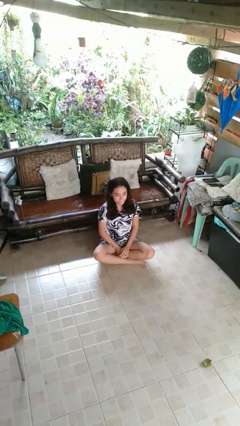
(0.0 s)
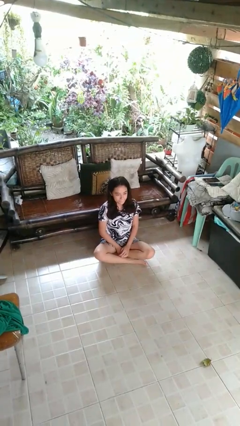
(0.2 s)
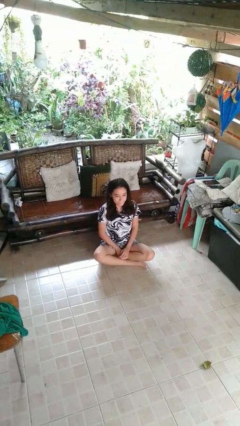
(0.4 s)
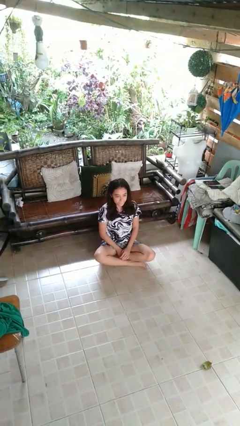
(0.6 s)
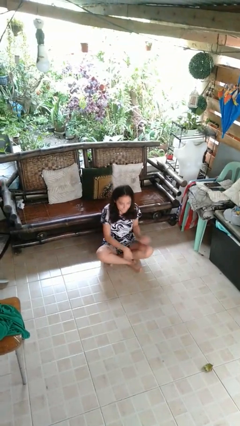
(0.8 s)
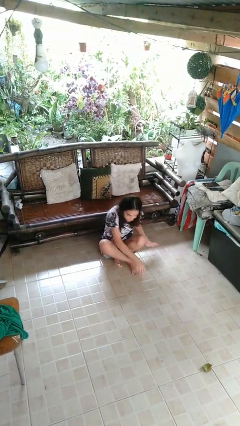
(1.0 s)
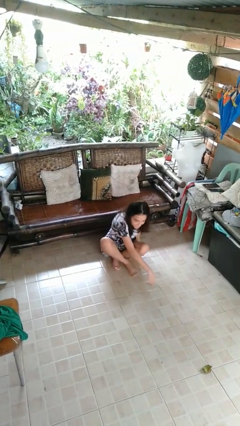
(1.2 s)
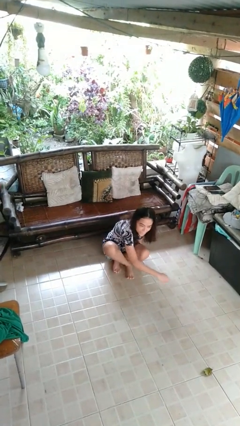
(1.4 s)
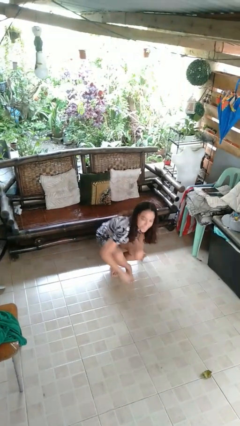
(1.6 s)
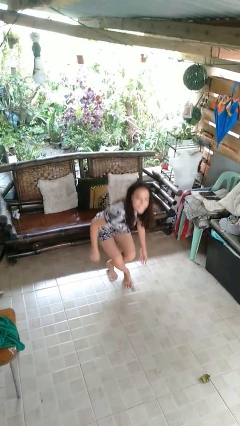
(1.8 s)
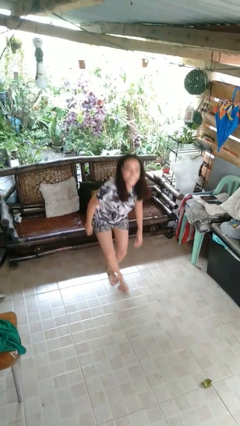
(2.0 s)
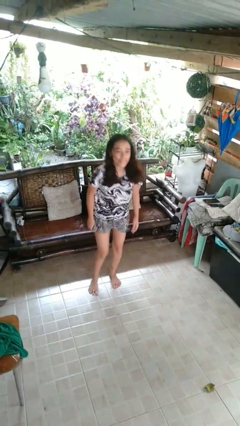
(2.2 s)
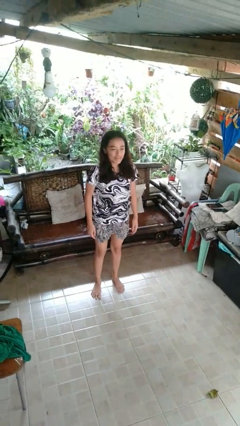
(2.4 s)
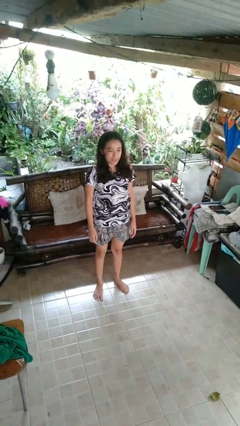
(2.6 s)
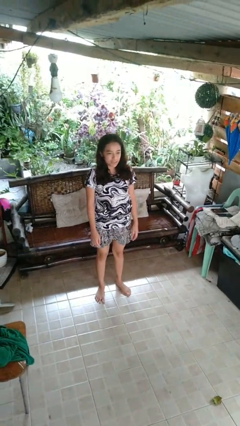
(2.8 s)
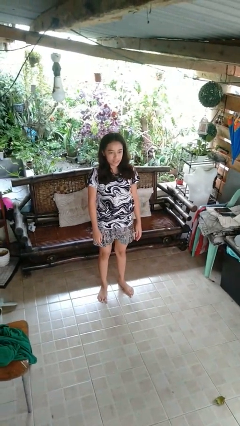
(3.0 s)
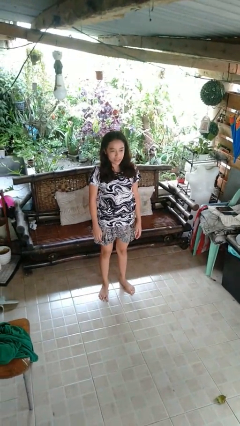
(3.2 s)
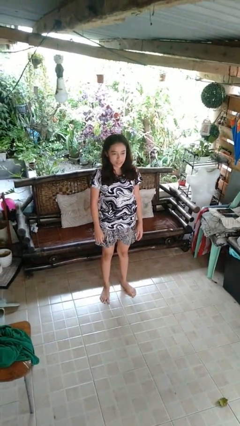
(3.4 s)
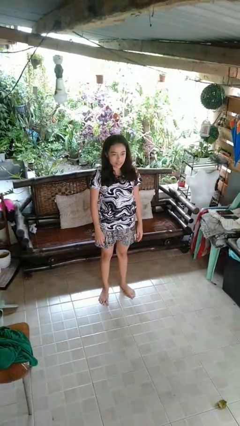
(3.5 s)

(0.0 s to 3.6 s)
person stands up from floor

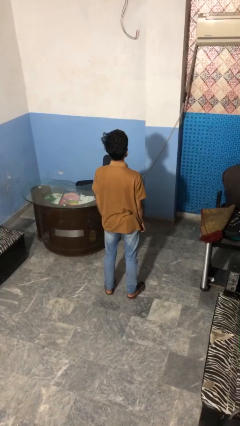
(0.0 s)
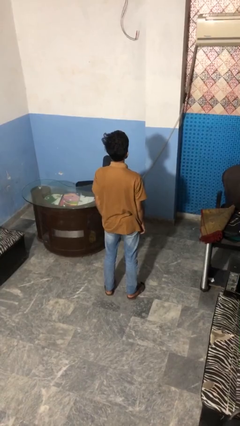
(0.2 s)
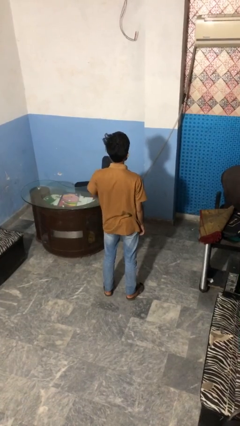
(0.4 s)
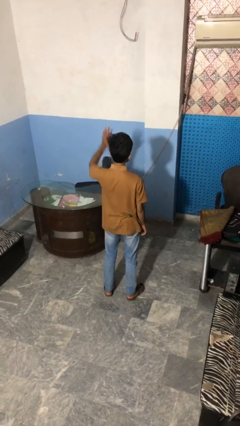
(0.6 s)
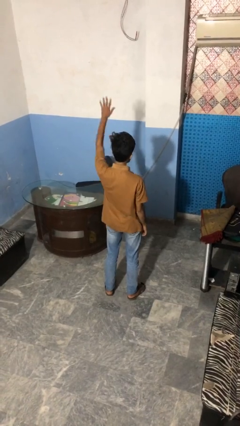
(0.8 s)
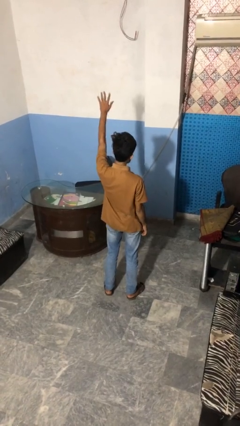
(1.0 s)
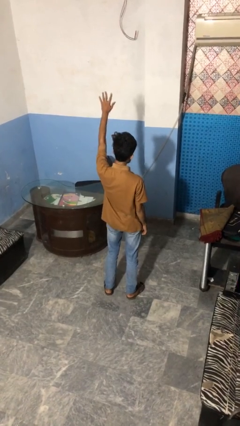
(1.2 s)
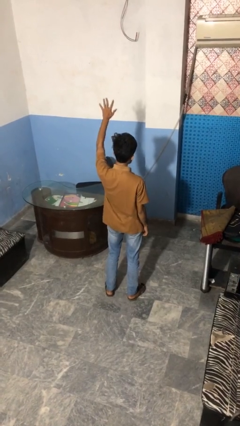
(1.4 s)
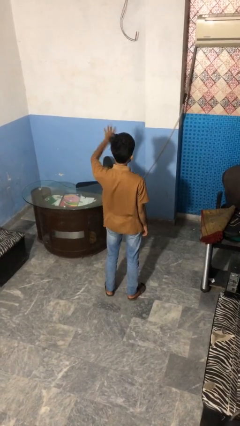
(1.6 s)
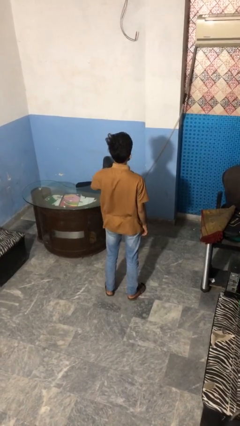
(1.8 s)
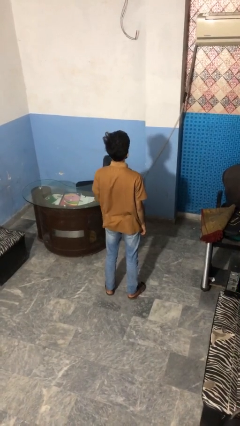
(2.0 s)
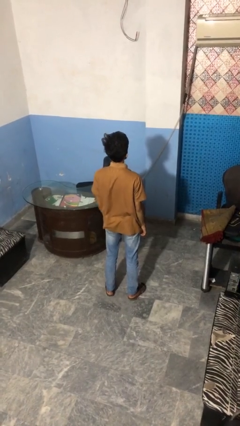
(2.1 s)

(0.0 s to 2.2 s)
person gestures number five

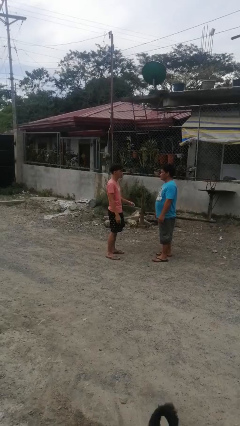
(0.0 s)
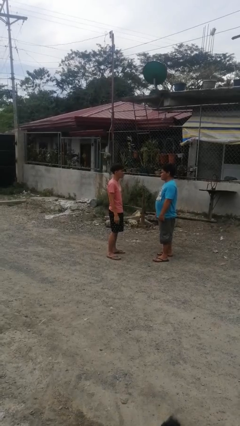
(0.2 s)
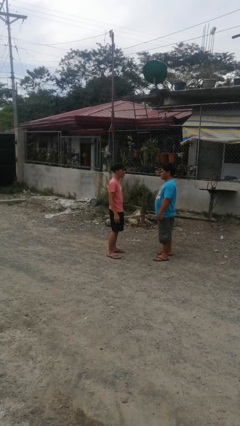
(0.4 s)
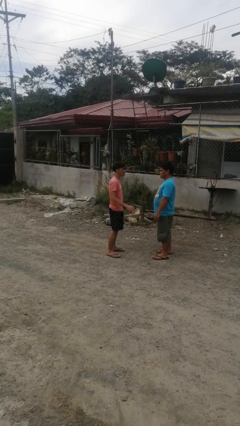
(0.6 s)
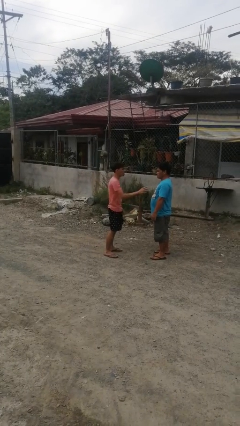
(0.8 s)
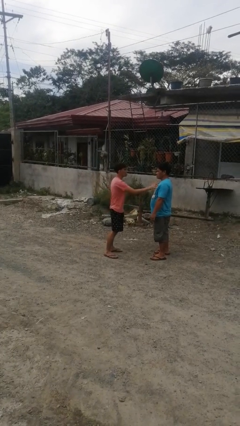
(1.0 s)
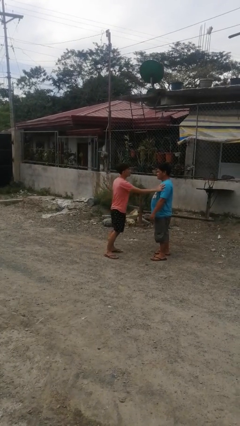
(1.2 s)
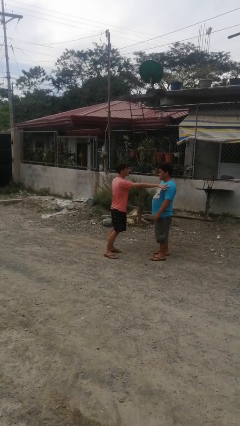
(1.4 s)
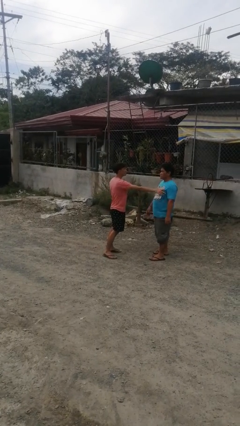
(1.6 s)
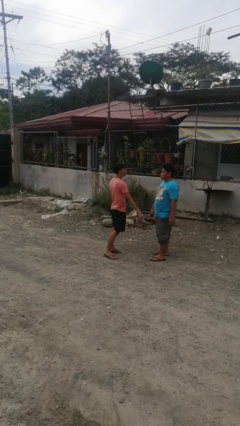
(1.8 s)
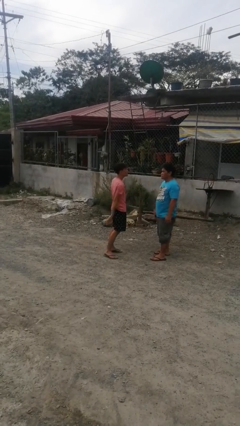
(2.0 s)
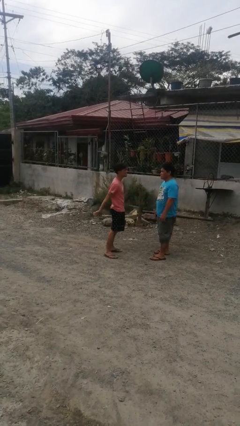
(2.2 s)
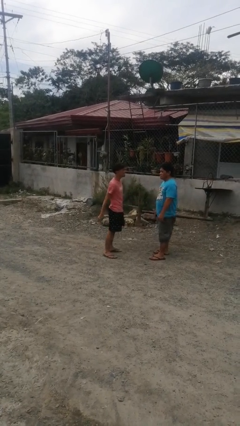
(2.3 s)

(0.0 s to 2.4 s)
person shoves person

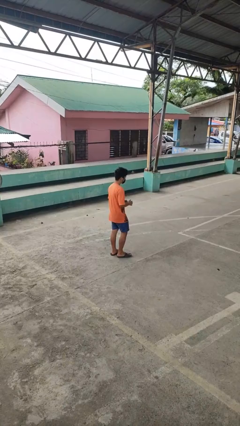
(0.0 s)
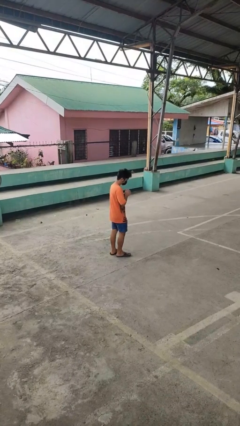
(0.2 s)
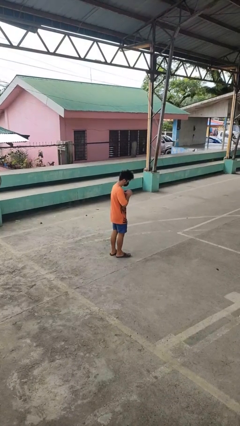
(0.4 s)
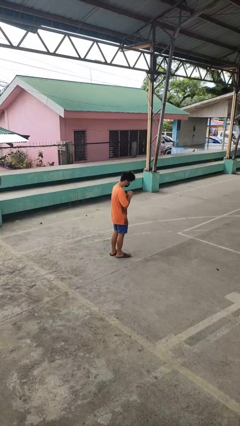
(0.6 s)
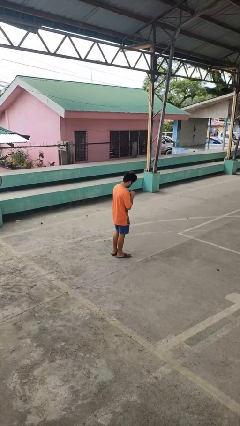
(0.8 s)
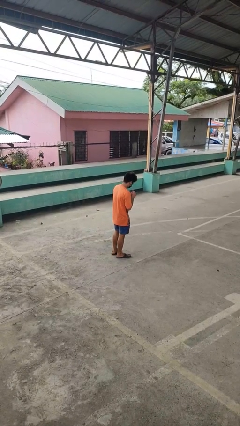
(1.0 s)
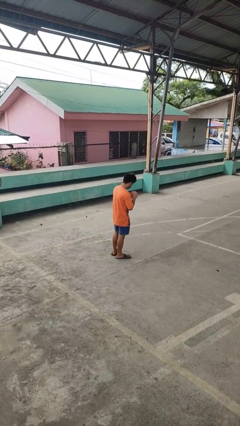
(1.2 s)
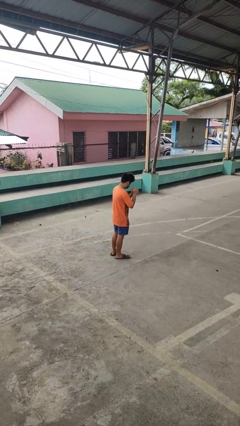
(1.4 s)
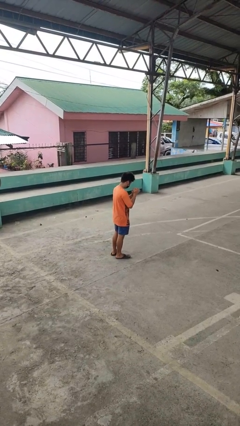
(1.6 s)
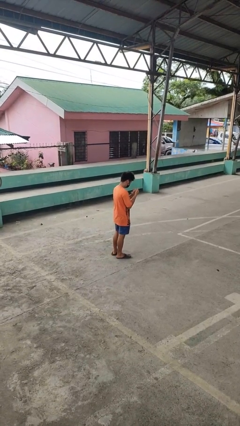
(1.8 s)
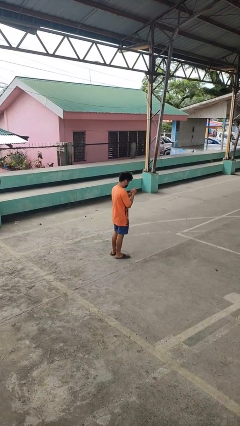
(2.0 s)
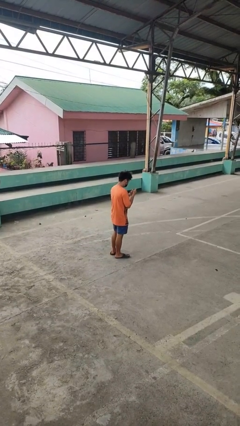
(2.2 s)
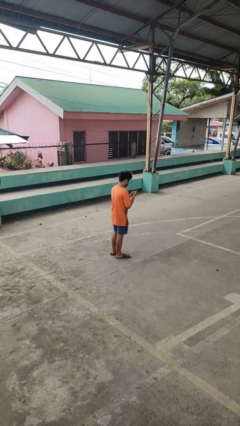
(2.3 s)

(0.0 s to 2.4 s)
person cracks knuckles

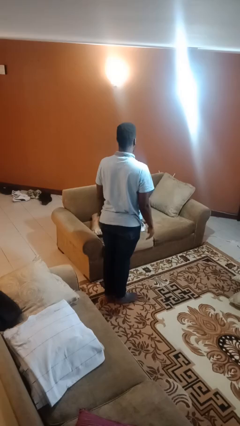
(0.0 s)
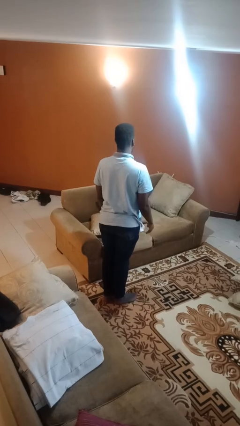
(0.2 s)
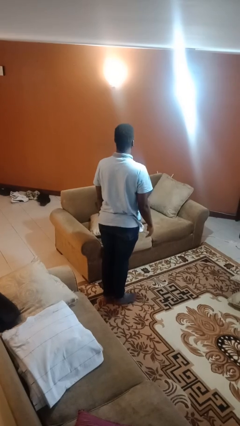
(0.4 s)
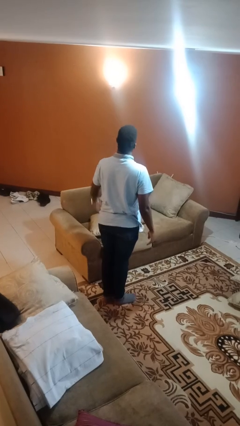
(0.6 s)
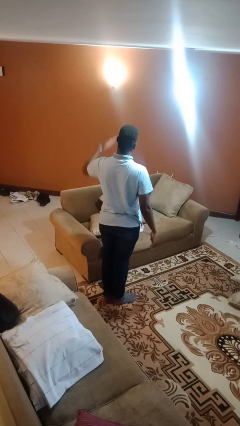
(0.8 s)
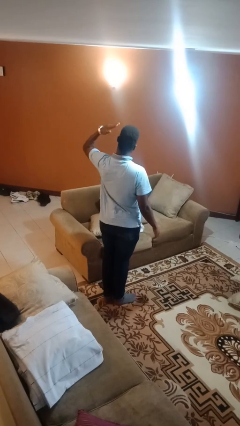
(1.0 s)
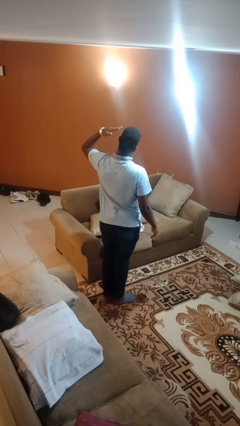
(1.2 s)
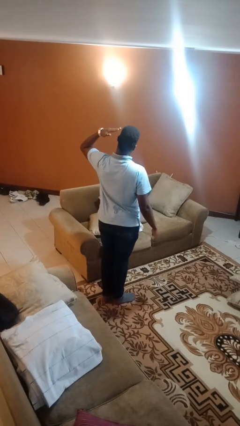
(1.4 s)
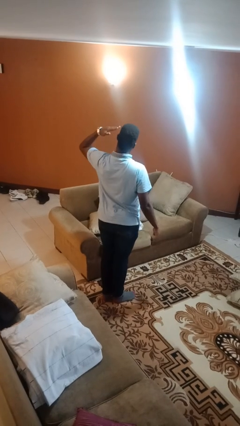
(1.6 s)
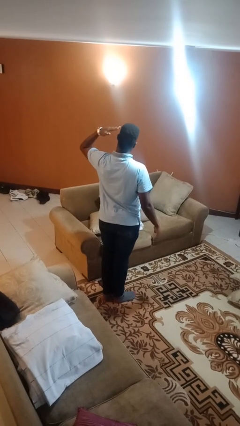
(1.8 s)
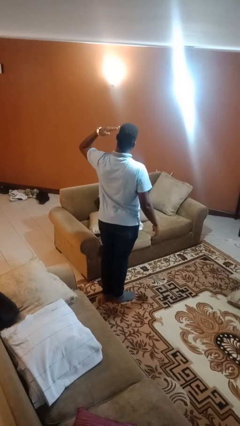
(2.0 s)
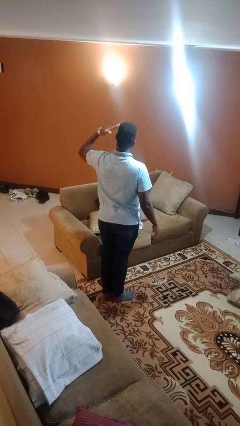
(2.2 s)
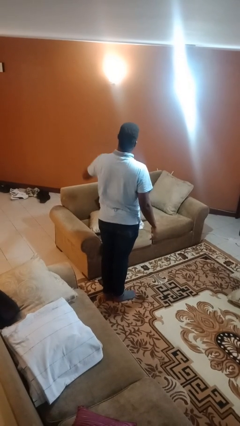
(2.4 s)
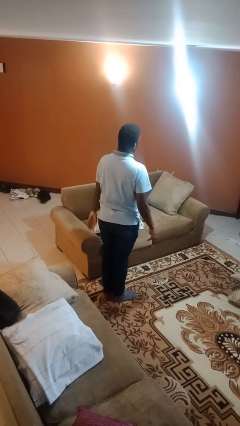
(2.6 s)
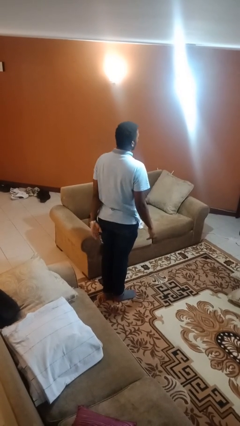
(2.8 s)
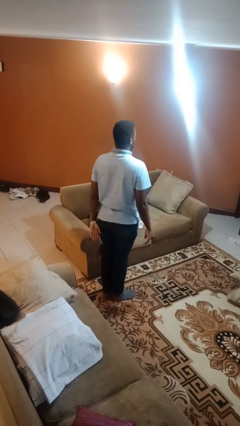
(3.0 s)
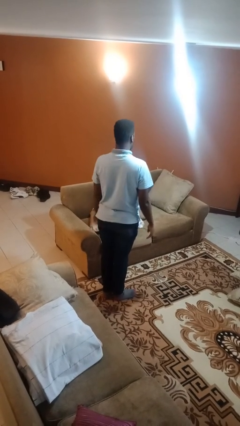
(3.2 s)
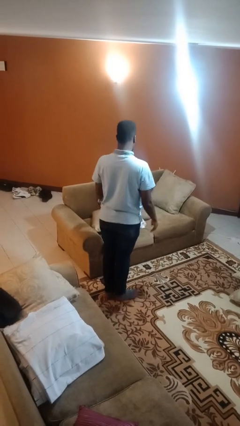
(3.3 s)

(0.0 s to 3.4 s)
person salutes

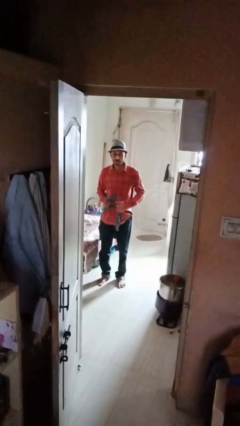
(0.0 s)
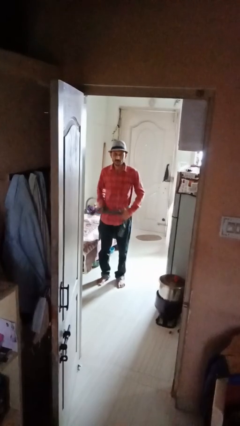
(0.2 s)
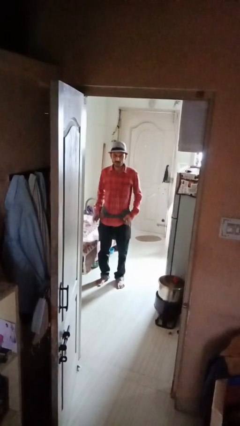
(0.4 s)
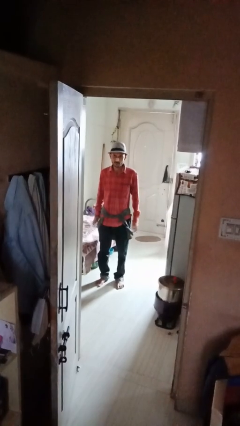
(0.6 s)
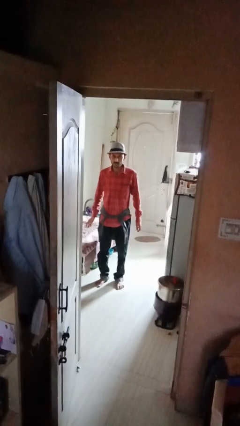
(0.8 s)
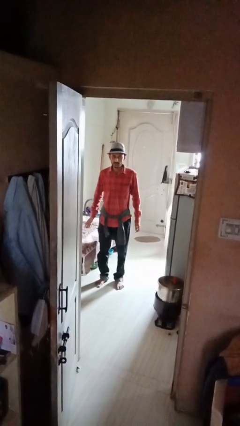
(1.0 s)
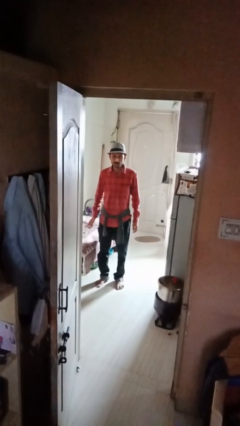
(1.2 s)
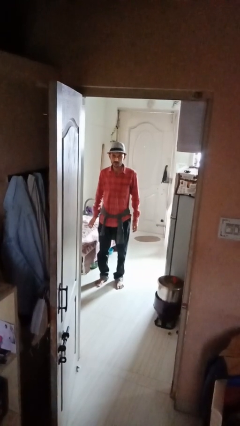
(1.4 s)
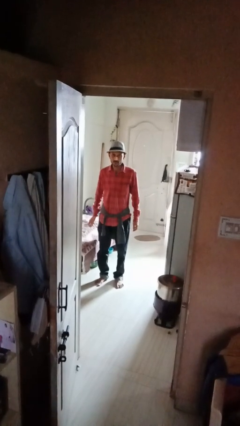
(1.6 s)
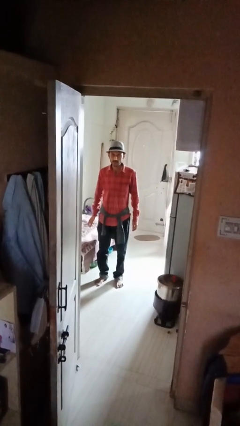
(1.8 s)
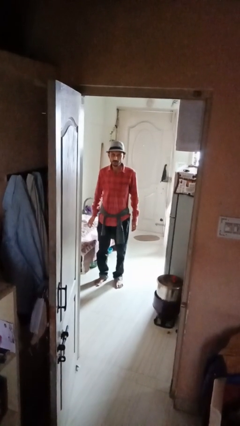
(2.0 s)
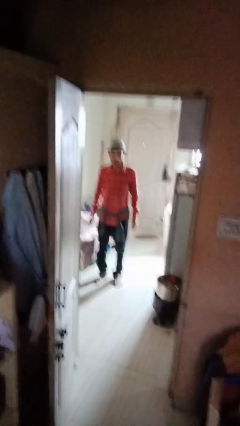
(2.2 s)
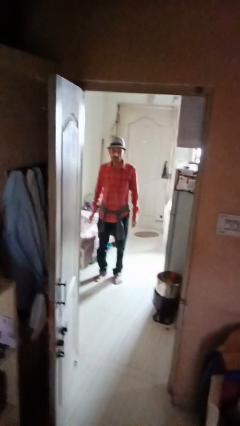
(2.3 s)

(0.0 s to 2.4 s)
person ties jacket around waist

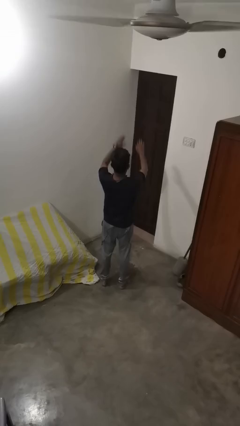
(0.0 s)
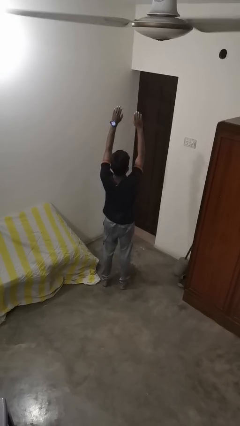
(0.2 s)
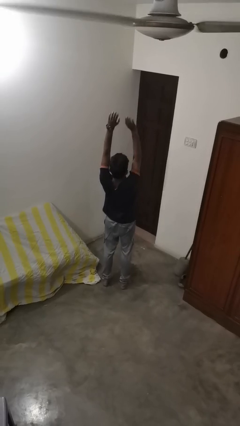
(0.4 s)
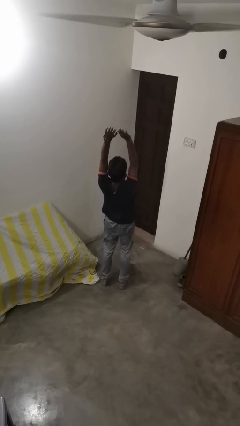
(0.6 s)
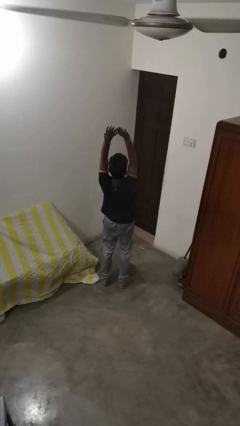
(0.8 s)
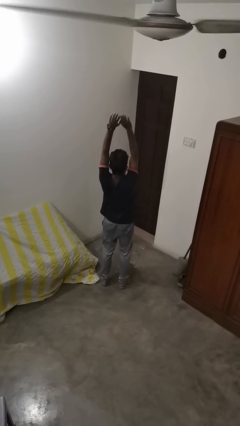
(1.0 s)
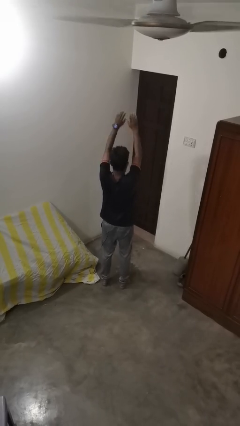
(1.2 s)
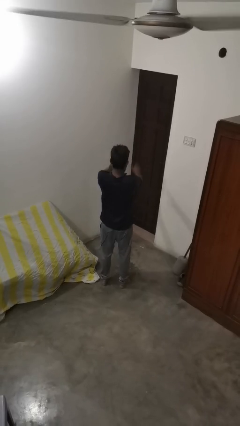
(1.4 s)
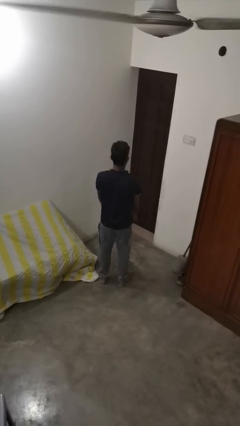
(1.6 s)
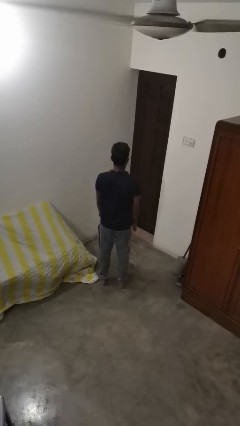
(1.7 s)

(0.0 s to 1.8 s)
person stretches arms over head
